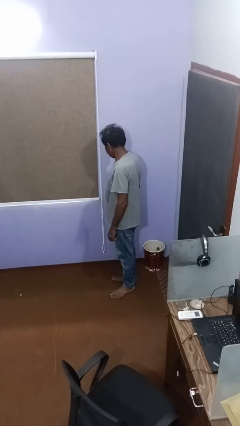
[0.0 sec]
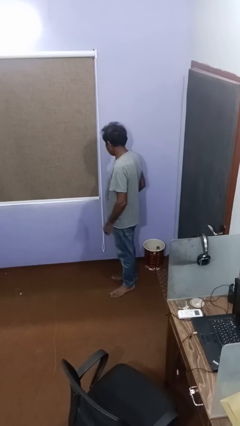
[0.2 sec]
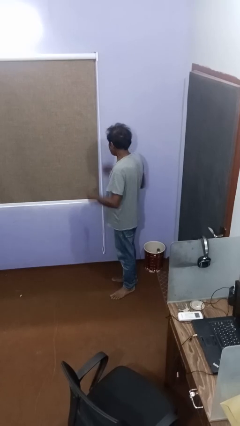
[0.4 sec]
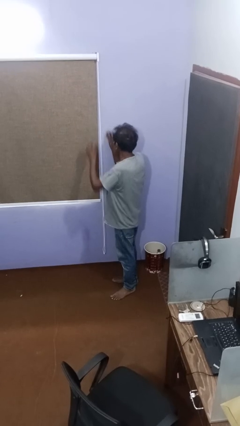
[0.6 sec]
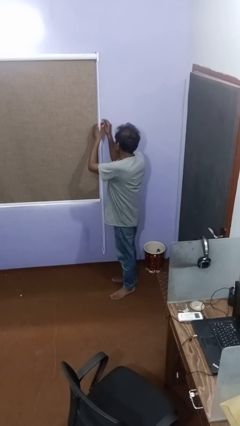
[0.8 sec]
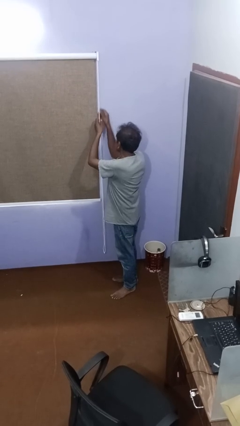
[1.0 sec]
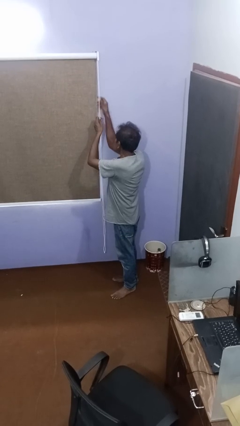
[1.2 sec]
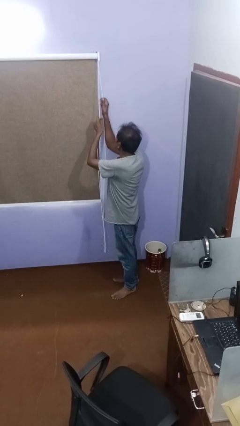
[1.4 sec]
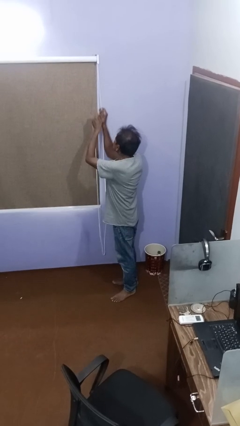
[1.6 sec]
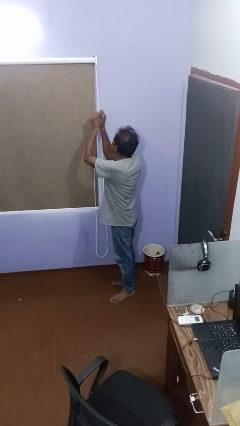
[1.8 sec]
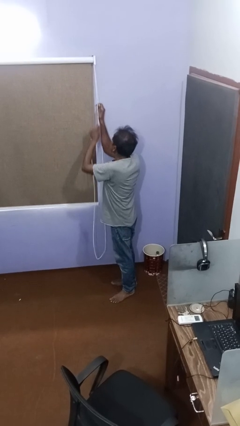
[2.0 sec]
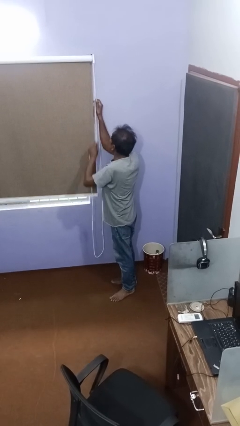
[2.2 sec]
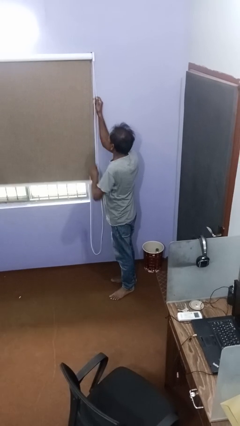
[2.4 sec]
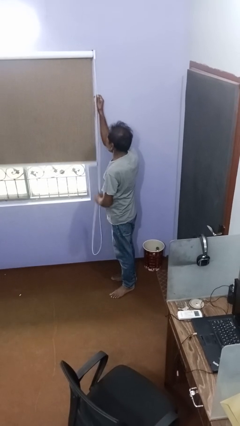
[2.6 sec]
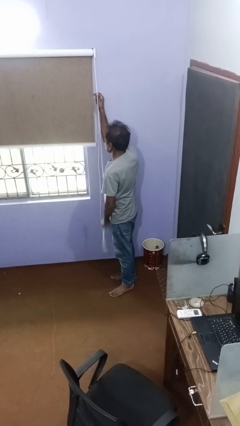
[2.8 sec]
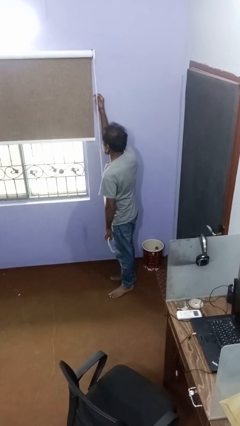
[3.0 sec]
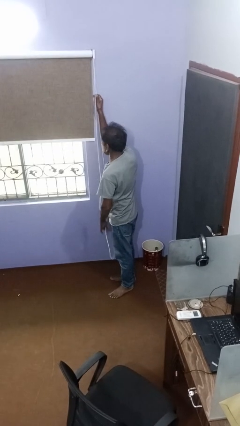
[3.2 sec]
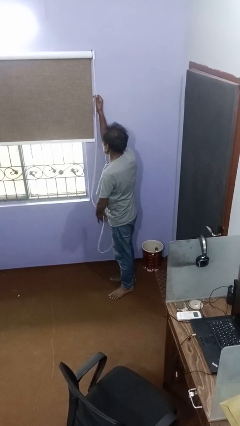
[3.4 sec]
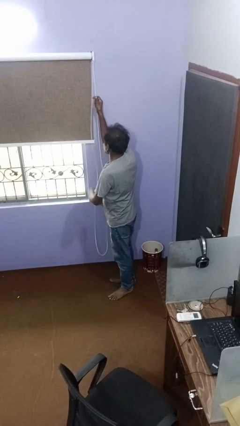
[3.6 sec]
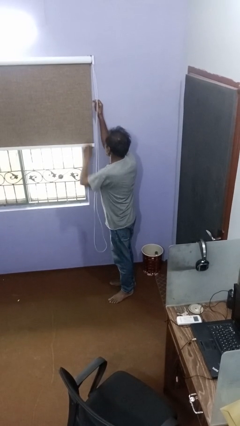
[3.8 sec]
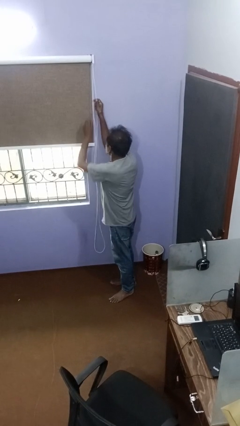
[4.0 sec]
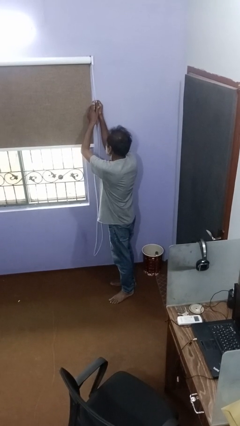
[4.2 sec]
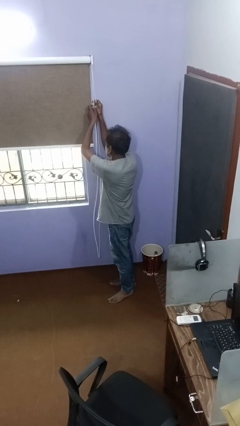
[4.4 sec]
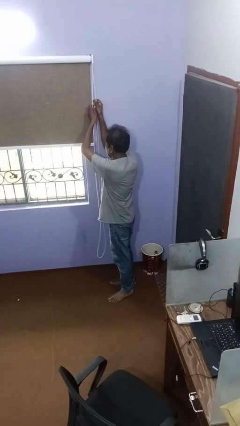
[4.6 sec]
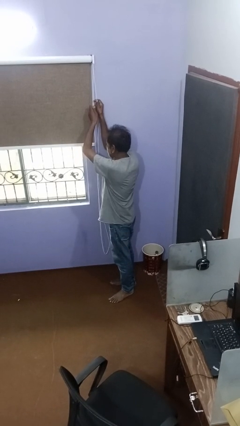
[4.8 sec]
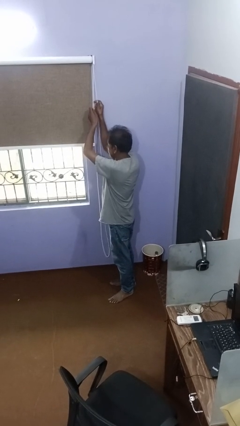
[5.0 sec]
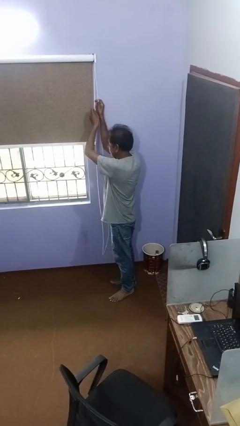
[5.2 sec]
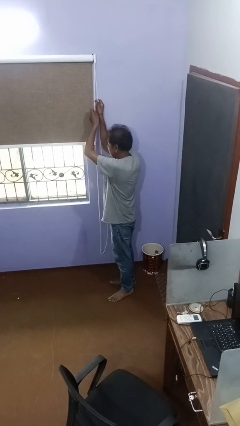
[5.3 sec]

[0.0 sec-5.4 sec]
person opens curtains

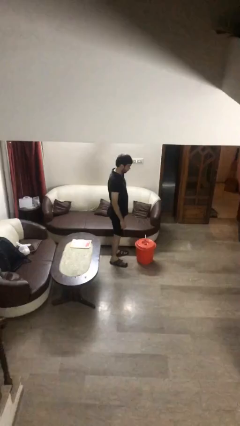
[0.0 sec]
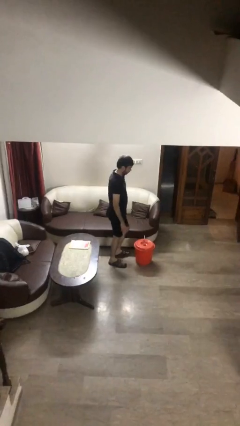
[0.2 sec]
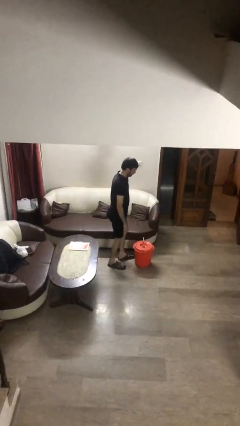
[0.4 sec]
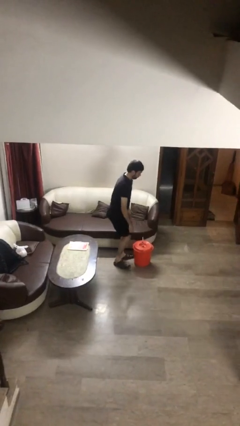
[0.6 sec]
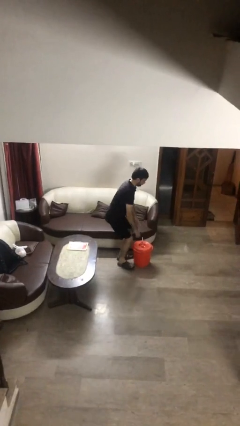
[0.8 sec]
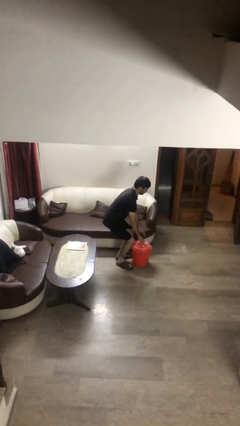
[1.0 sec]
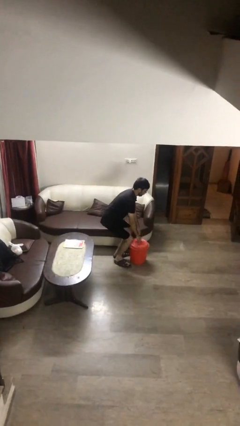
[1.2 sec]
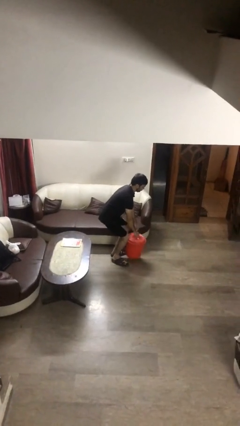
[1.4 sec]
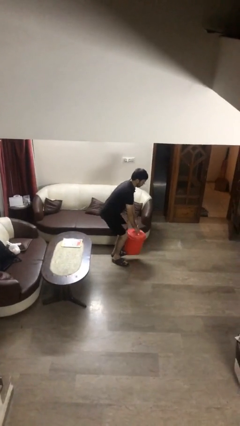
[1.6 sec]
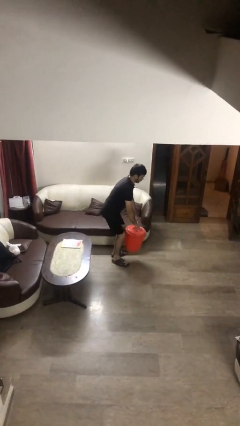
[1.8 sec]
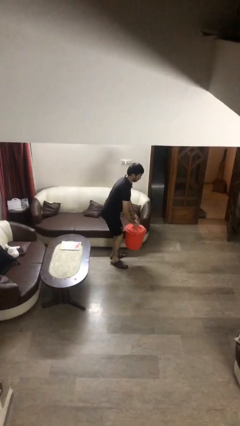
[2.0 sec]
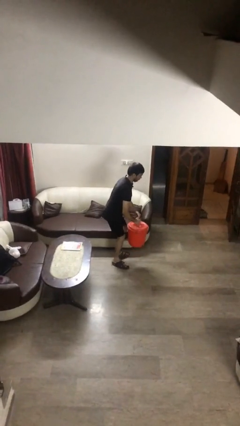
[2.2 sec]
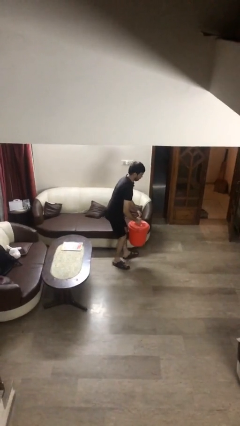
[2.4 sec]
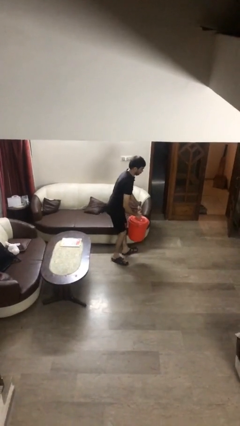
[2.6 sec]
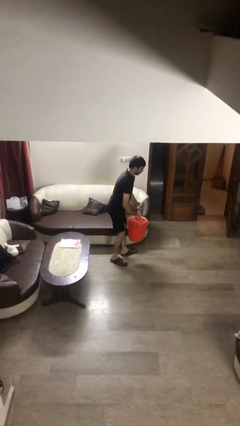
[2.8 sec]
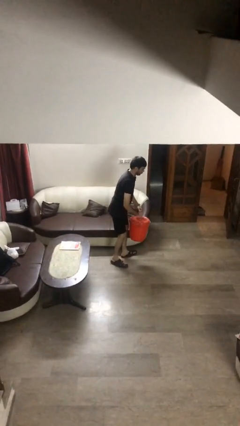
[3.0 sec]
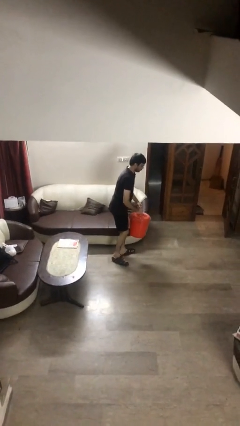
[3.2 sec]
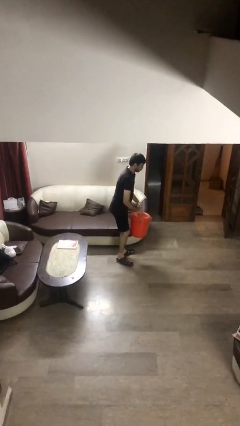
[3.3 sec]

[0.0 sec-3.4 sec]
person picks up object from floor

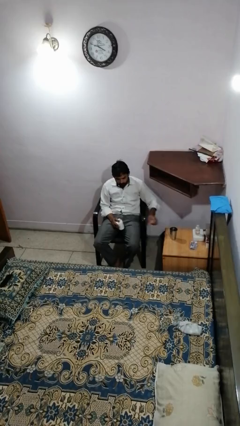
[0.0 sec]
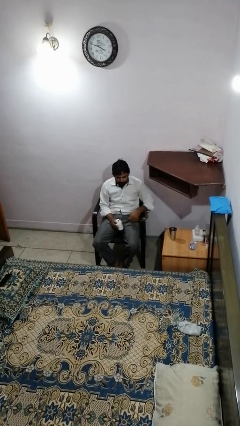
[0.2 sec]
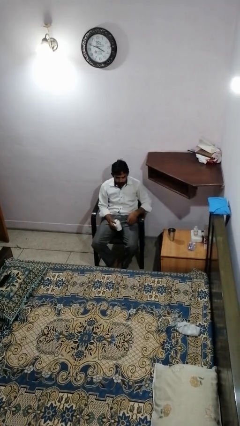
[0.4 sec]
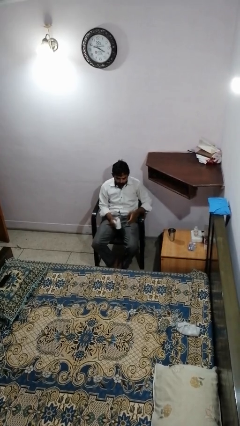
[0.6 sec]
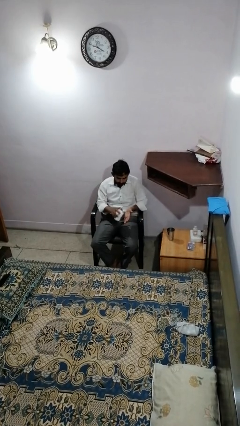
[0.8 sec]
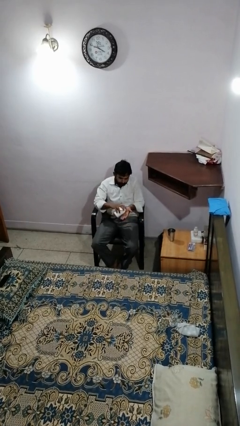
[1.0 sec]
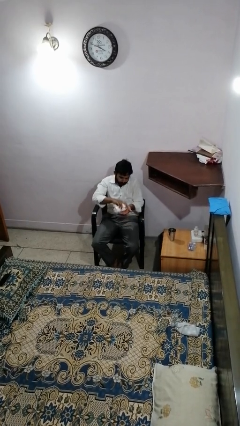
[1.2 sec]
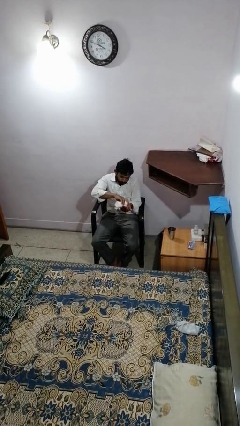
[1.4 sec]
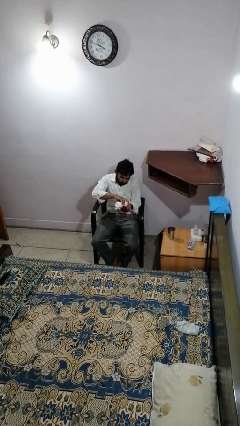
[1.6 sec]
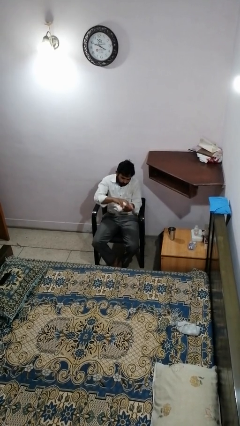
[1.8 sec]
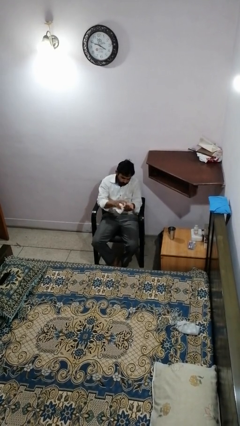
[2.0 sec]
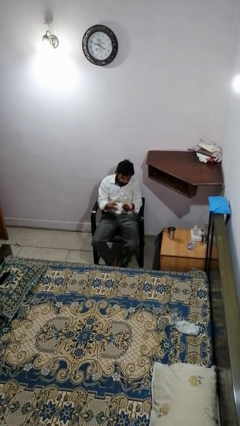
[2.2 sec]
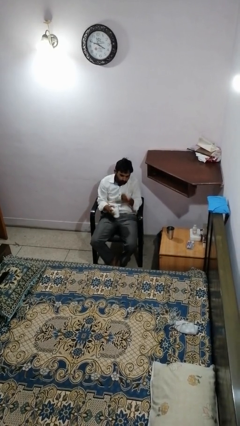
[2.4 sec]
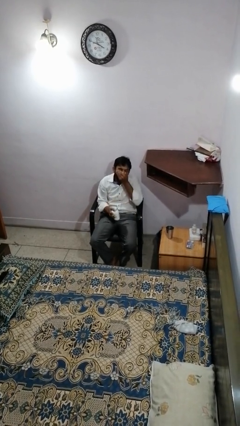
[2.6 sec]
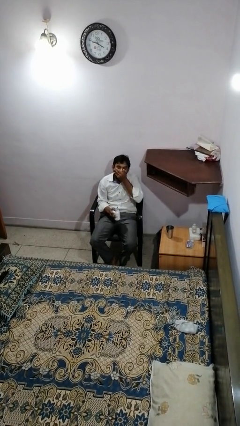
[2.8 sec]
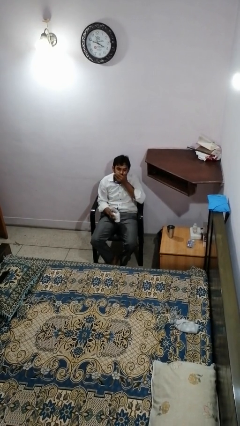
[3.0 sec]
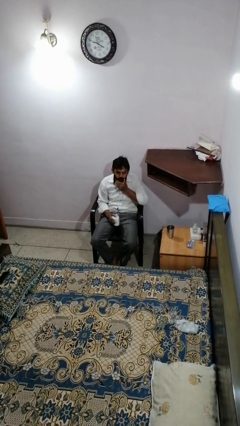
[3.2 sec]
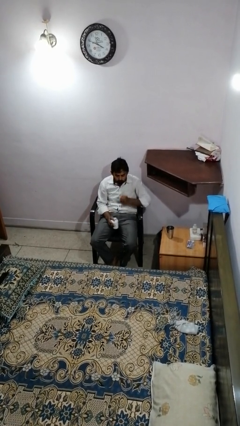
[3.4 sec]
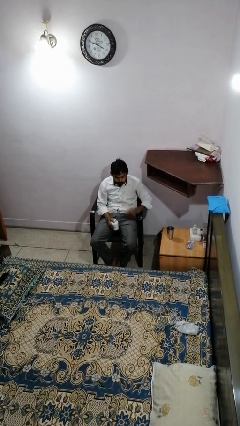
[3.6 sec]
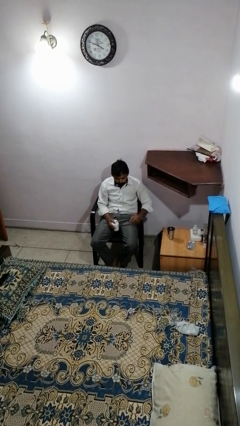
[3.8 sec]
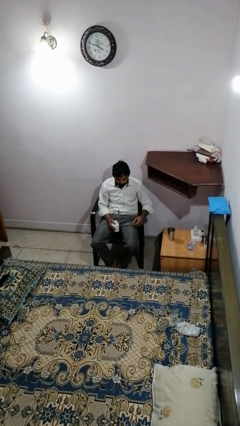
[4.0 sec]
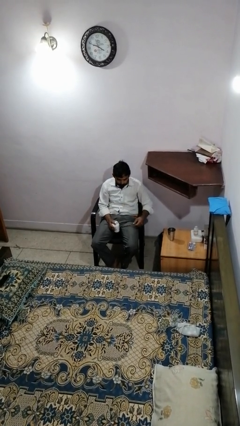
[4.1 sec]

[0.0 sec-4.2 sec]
person takes medicine pills

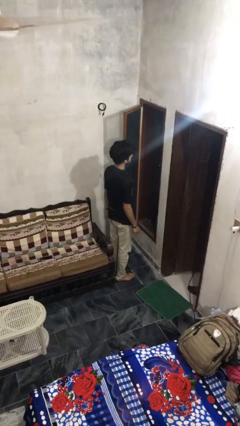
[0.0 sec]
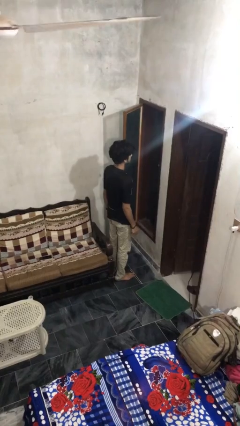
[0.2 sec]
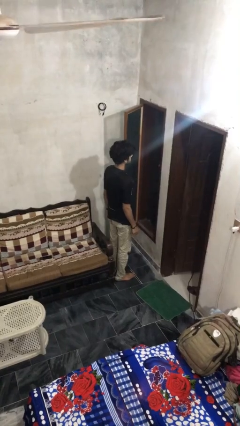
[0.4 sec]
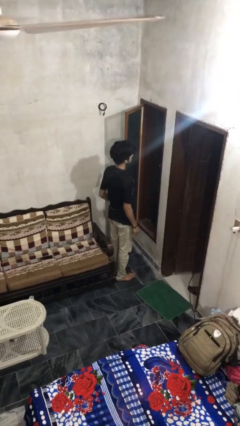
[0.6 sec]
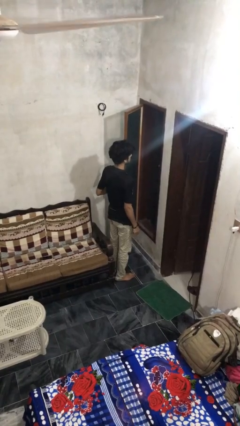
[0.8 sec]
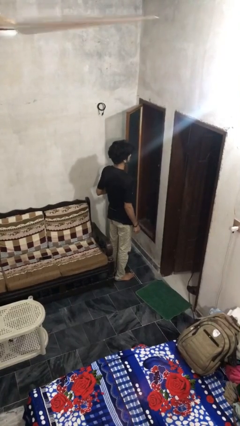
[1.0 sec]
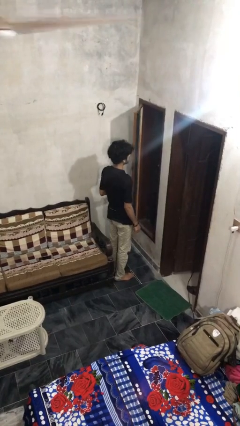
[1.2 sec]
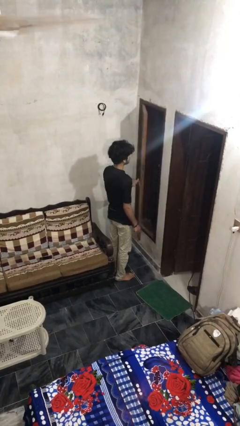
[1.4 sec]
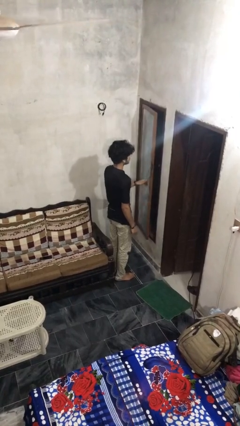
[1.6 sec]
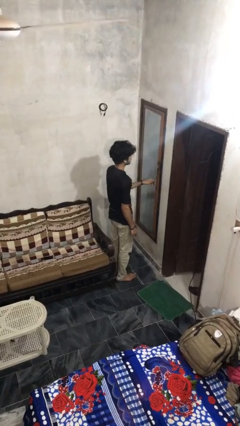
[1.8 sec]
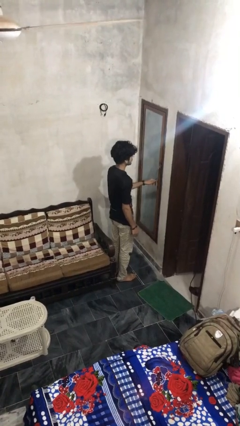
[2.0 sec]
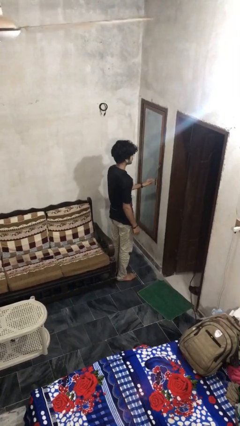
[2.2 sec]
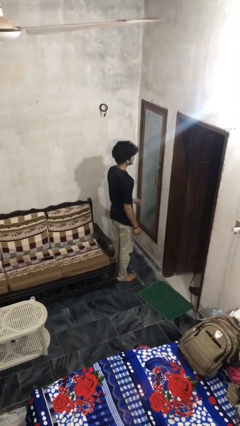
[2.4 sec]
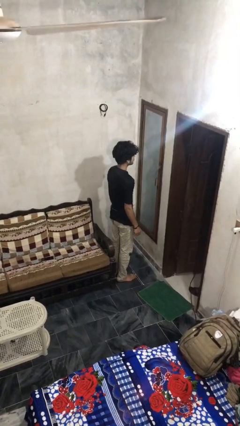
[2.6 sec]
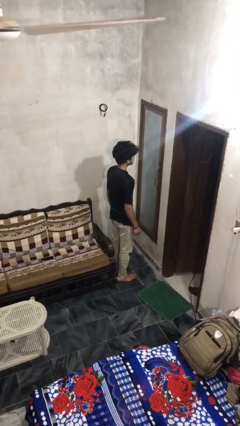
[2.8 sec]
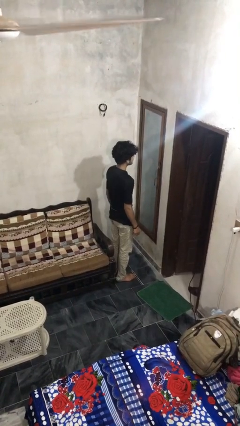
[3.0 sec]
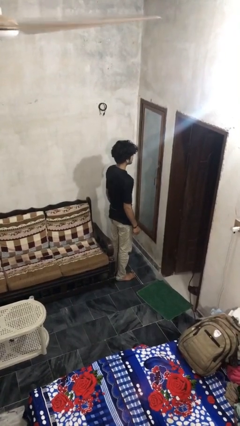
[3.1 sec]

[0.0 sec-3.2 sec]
person closes home window

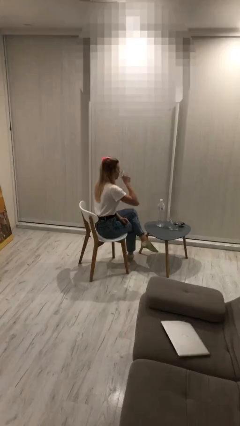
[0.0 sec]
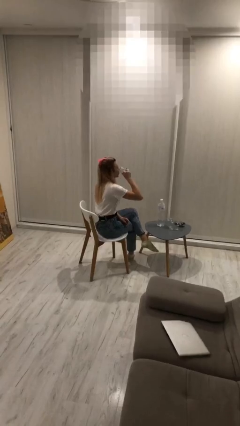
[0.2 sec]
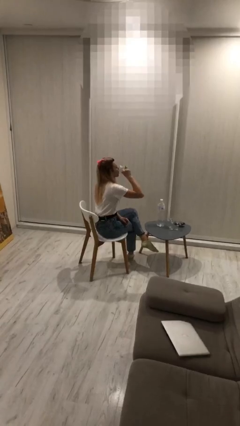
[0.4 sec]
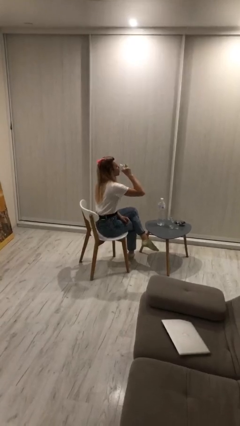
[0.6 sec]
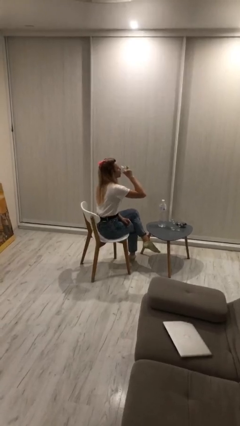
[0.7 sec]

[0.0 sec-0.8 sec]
person drinks from mug

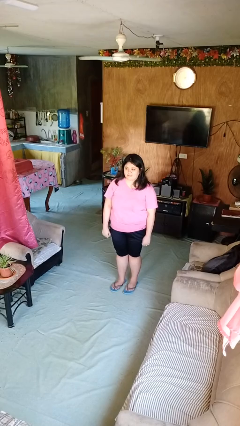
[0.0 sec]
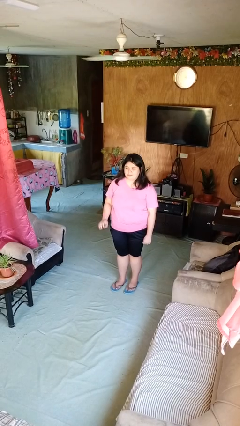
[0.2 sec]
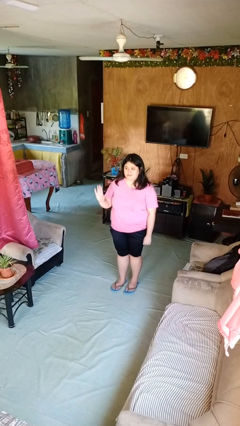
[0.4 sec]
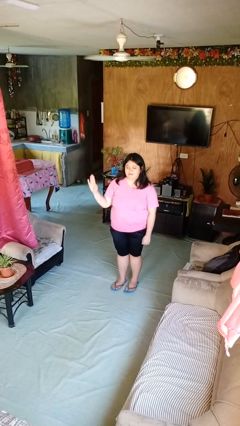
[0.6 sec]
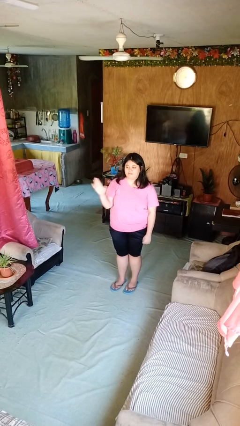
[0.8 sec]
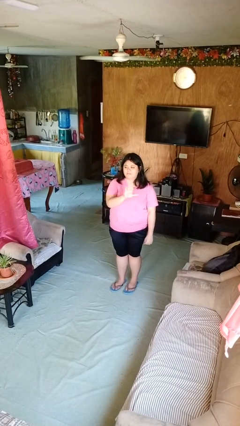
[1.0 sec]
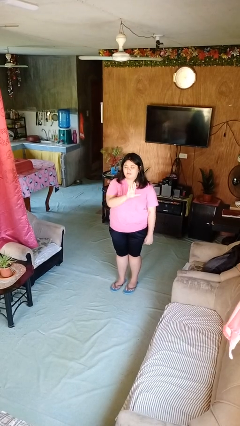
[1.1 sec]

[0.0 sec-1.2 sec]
person gestures swipe left
